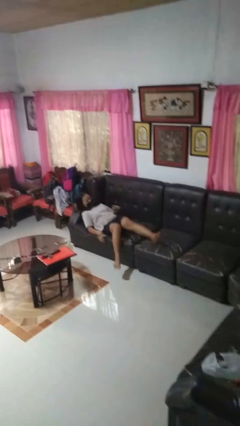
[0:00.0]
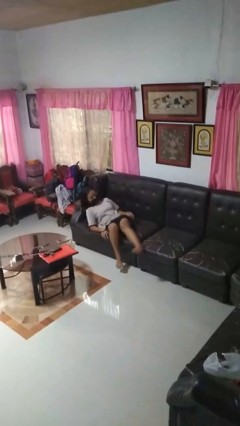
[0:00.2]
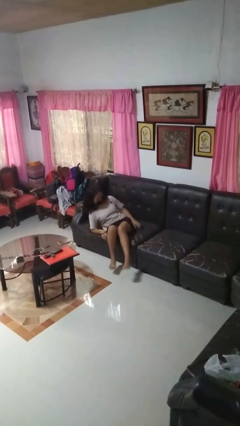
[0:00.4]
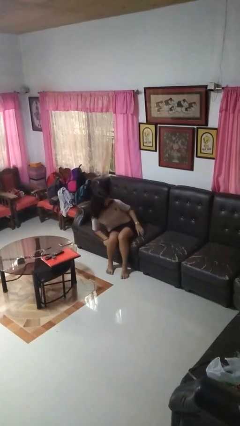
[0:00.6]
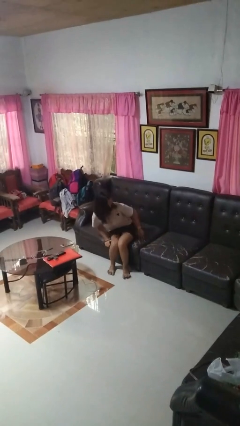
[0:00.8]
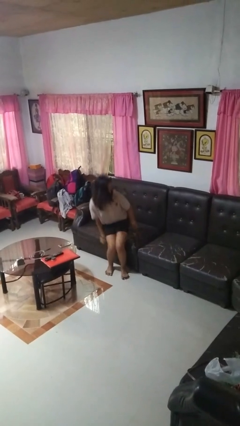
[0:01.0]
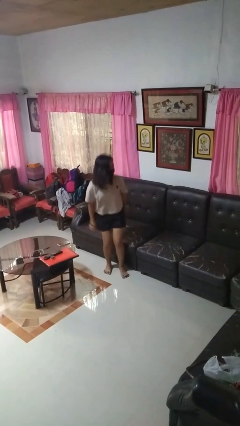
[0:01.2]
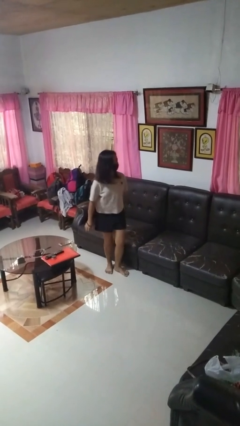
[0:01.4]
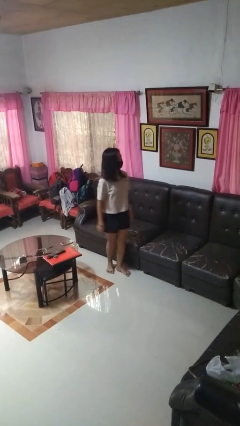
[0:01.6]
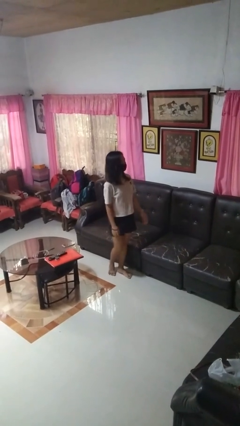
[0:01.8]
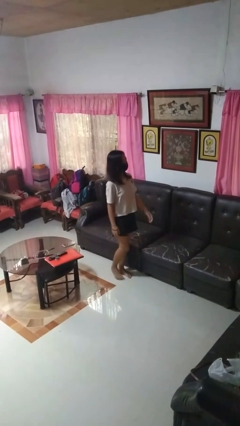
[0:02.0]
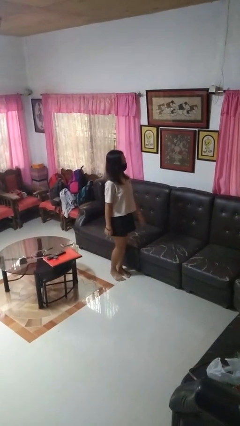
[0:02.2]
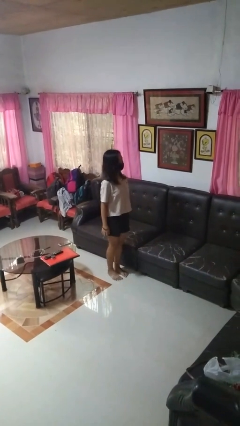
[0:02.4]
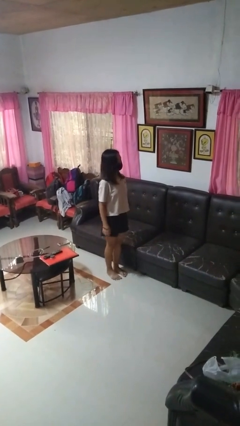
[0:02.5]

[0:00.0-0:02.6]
person stands up

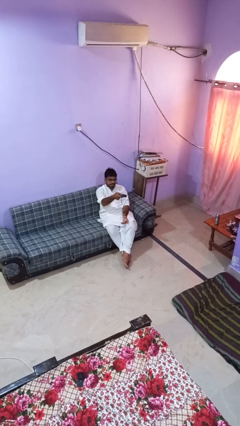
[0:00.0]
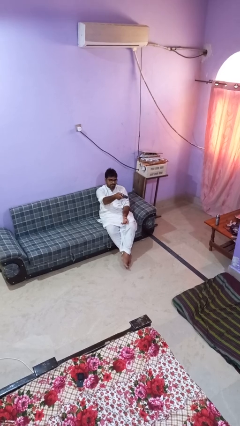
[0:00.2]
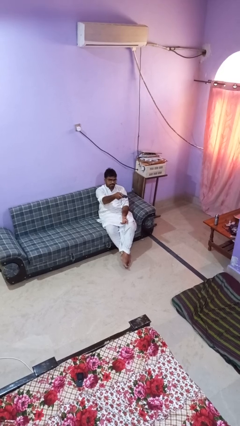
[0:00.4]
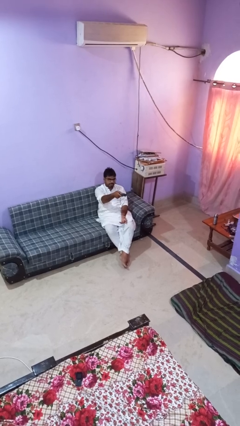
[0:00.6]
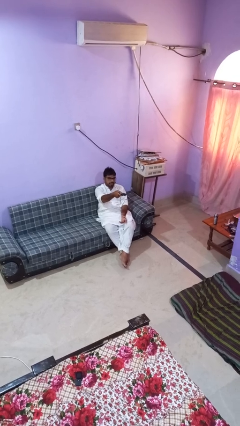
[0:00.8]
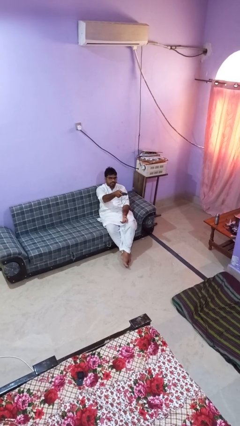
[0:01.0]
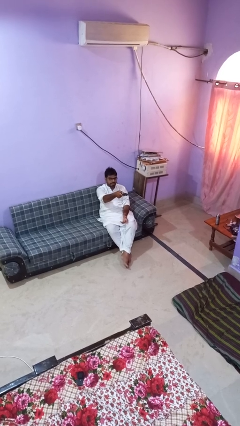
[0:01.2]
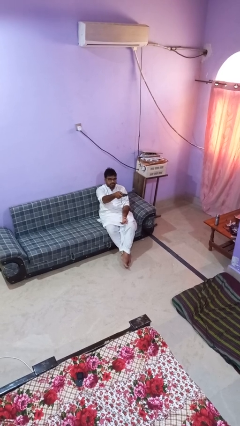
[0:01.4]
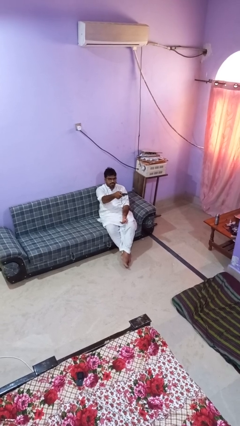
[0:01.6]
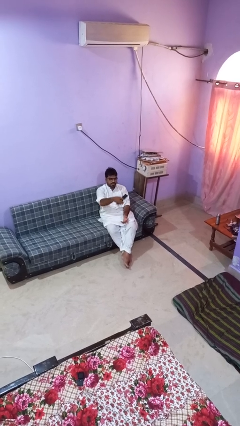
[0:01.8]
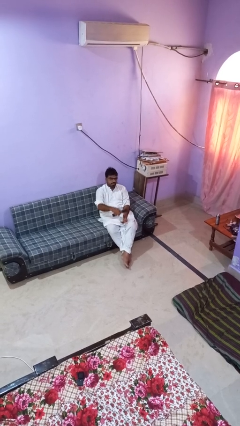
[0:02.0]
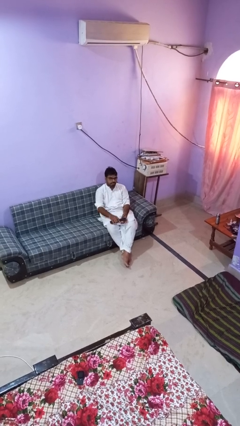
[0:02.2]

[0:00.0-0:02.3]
person uses television remote

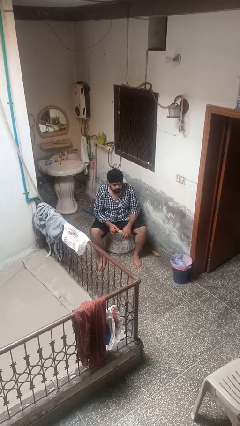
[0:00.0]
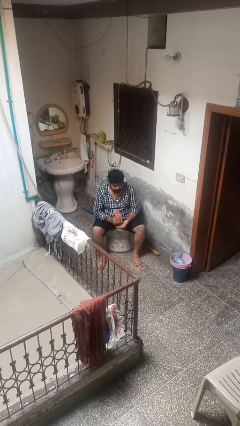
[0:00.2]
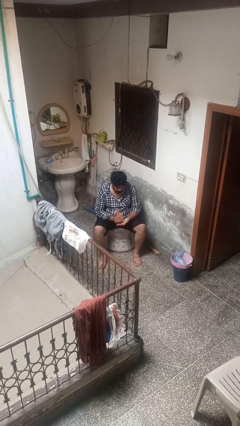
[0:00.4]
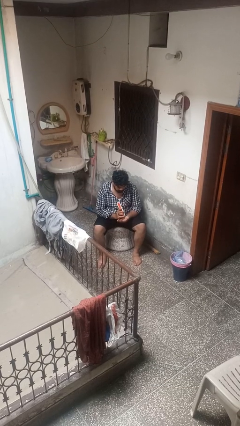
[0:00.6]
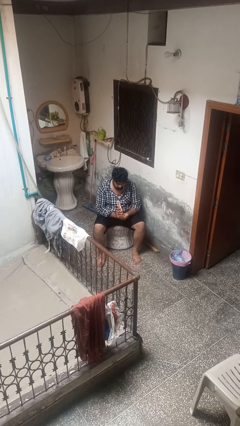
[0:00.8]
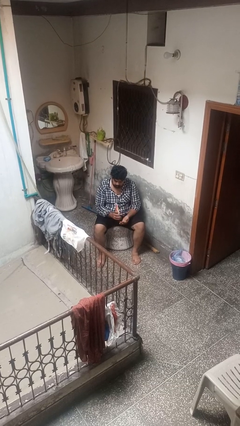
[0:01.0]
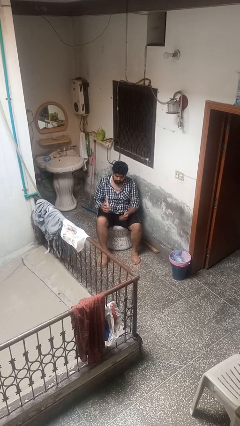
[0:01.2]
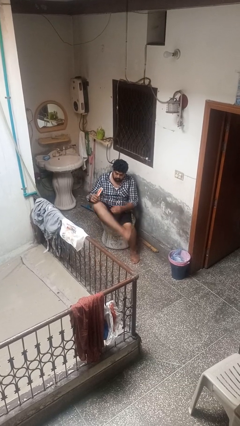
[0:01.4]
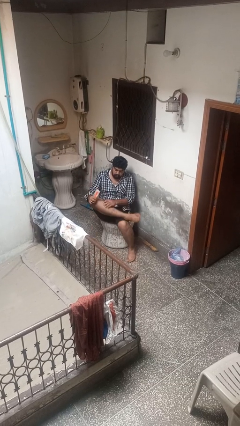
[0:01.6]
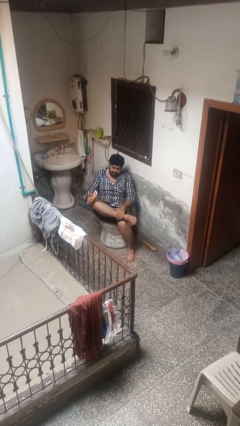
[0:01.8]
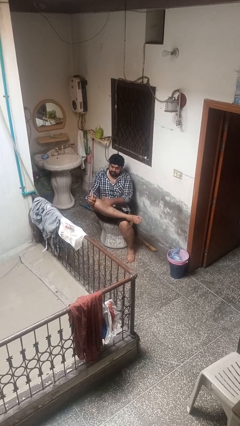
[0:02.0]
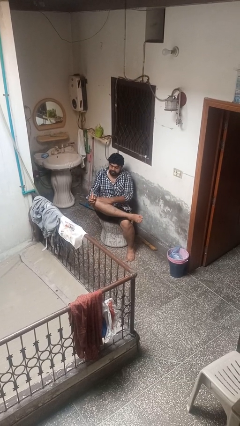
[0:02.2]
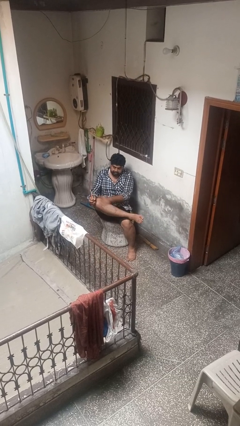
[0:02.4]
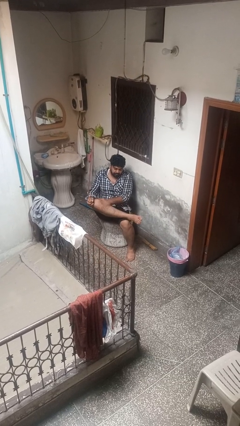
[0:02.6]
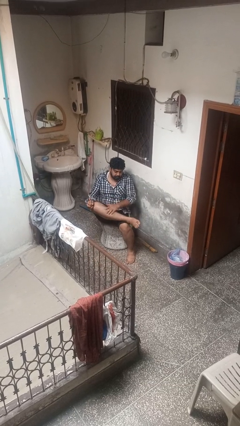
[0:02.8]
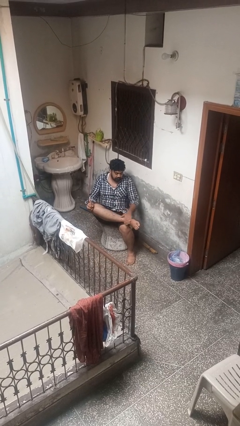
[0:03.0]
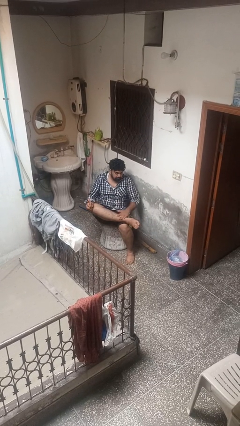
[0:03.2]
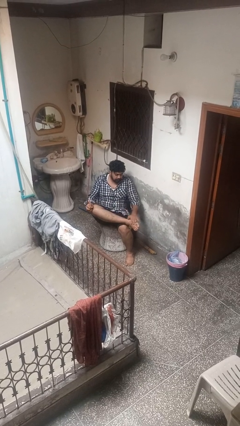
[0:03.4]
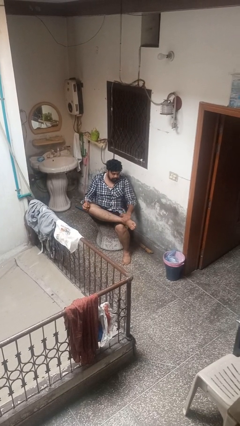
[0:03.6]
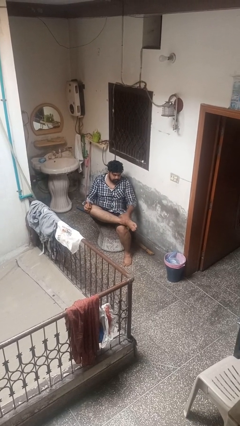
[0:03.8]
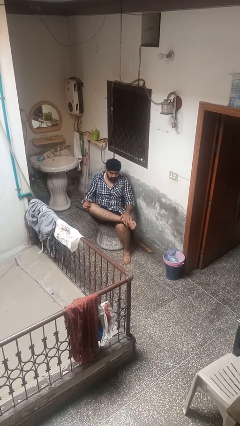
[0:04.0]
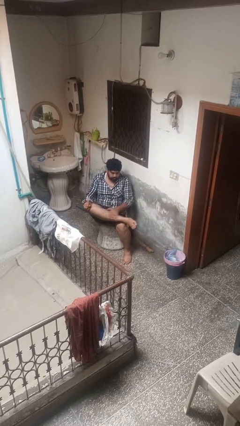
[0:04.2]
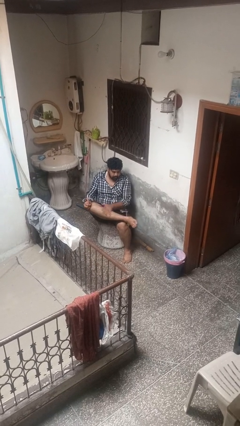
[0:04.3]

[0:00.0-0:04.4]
person applies sunscreen

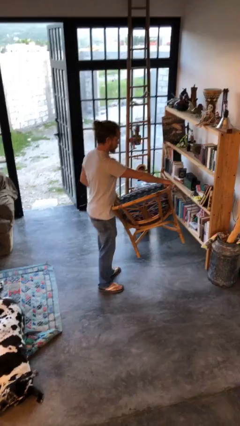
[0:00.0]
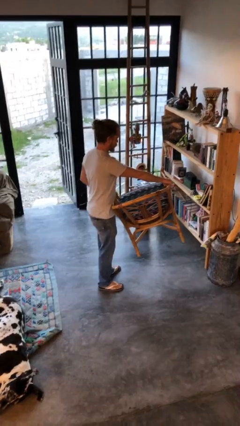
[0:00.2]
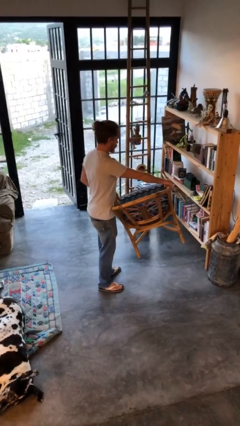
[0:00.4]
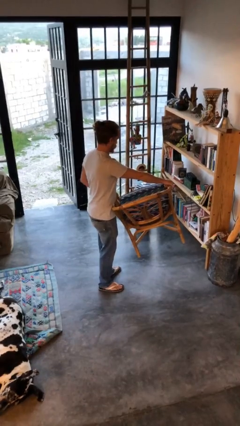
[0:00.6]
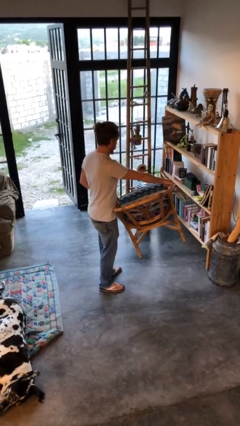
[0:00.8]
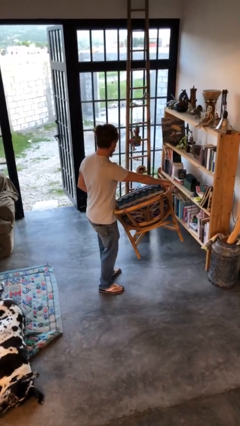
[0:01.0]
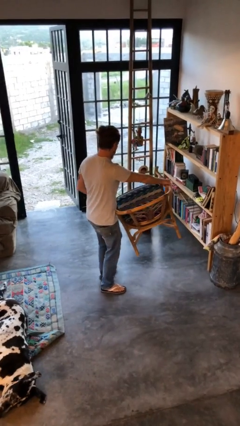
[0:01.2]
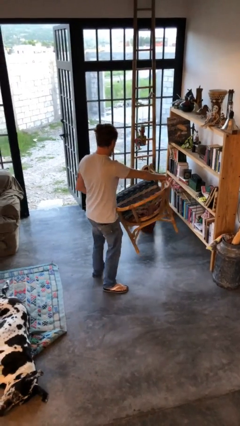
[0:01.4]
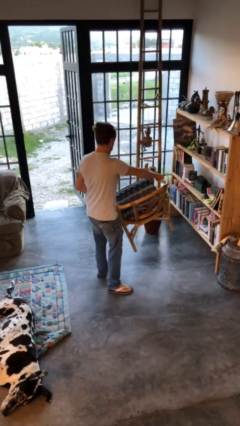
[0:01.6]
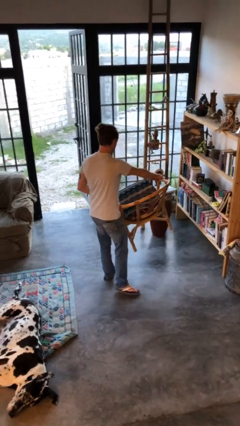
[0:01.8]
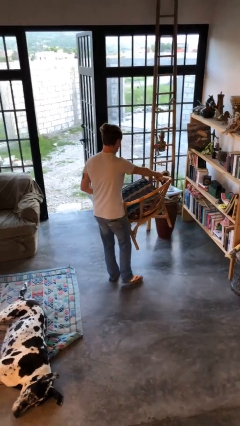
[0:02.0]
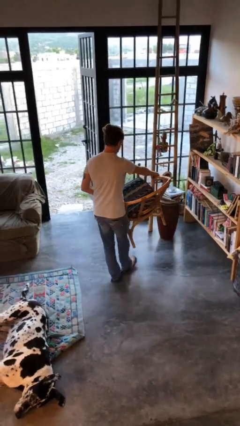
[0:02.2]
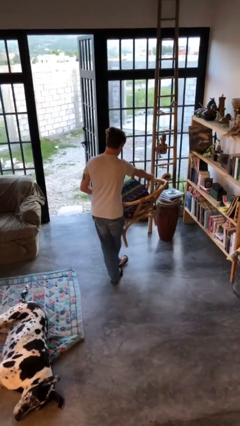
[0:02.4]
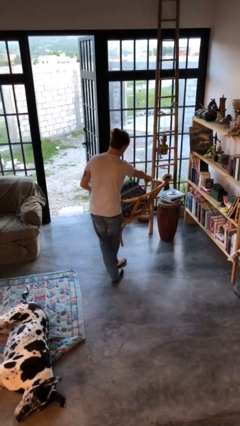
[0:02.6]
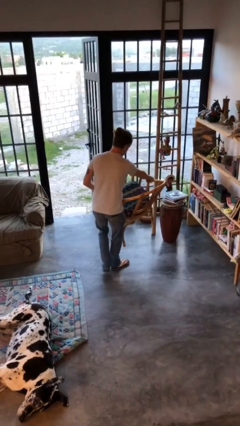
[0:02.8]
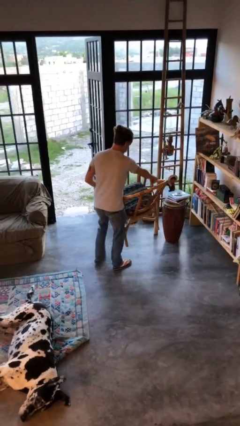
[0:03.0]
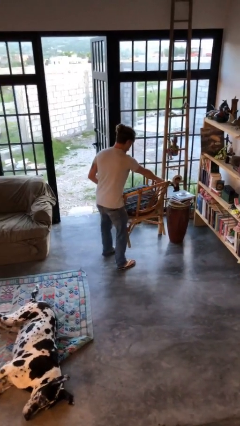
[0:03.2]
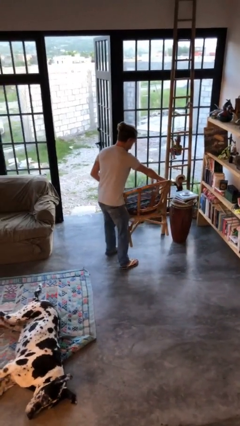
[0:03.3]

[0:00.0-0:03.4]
person carries furniture

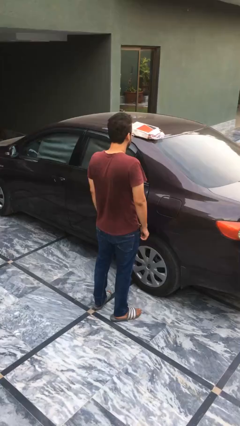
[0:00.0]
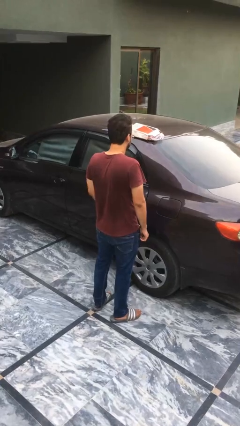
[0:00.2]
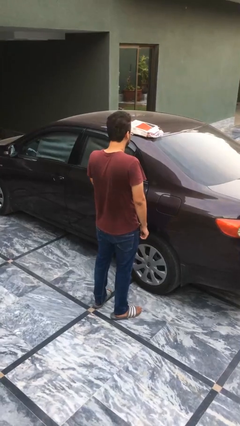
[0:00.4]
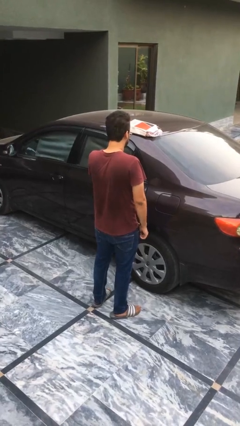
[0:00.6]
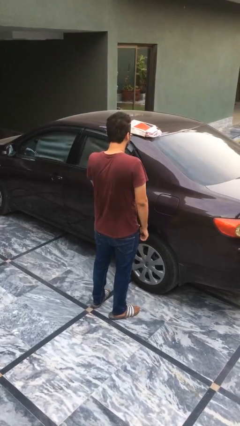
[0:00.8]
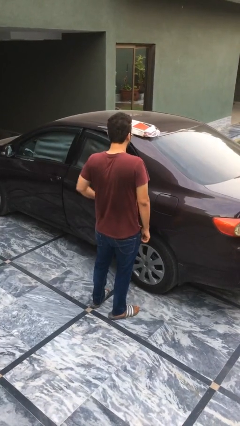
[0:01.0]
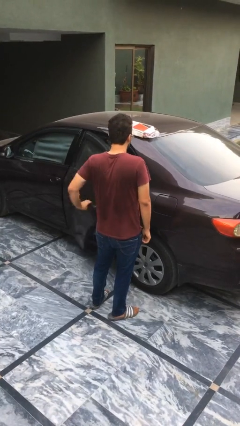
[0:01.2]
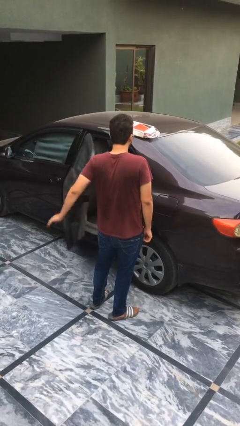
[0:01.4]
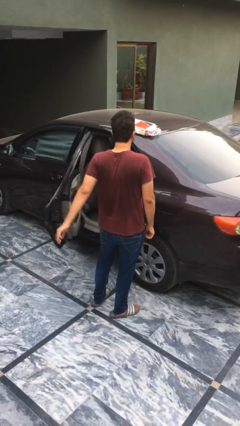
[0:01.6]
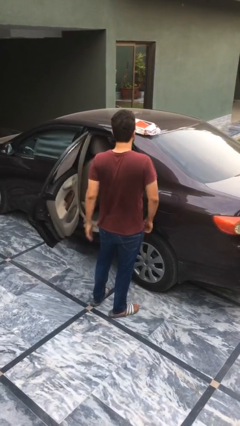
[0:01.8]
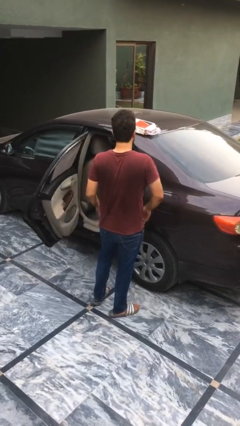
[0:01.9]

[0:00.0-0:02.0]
person opens car door

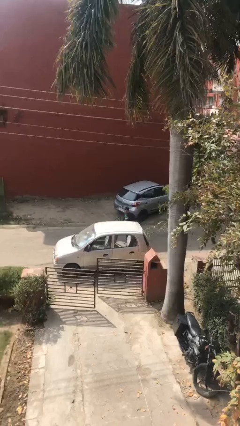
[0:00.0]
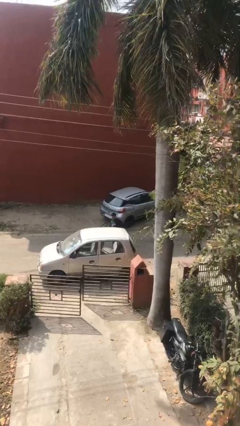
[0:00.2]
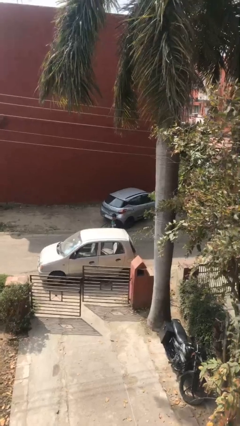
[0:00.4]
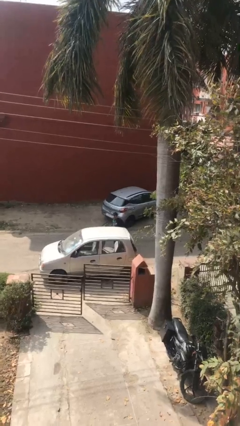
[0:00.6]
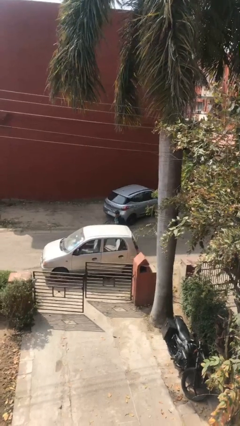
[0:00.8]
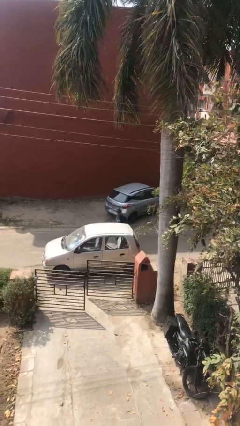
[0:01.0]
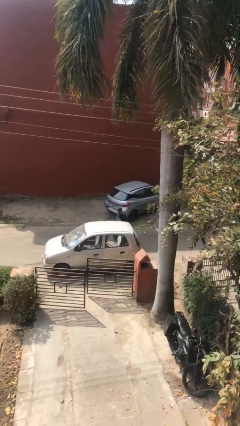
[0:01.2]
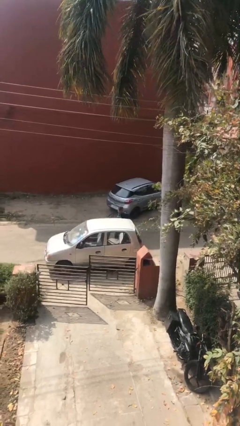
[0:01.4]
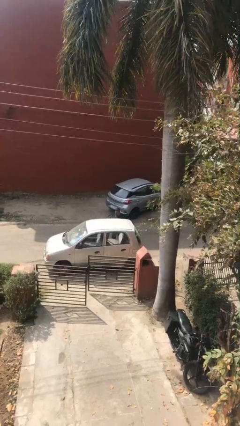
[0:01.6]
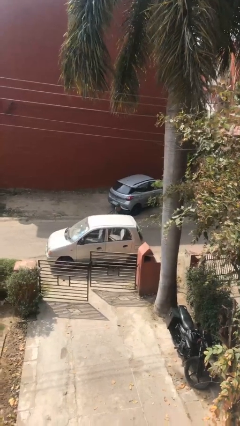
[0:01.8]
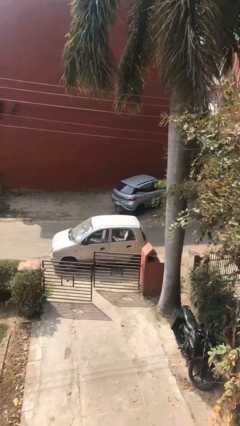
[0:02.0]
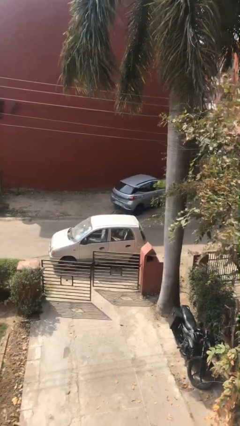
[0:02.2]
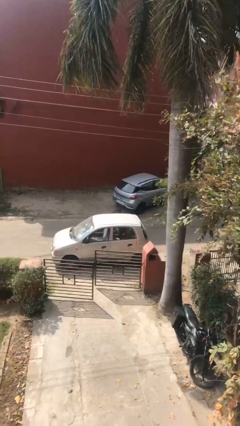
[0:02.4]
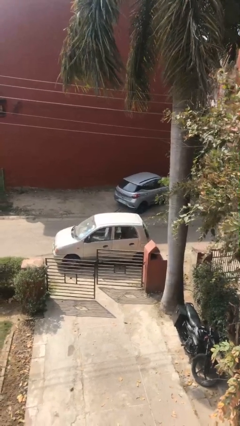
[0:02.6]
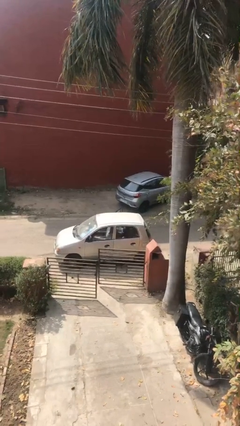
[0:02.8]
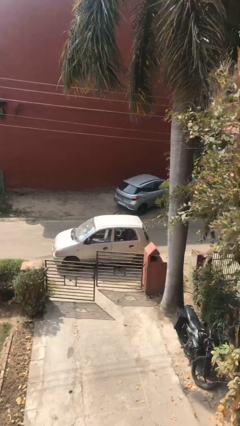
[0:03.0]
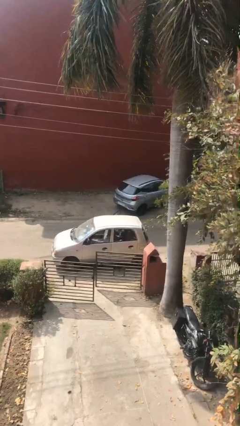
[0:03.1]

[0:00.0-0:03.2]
person enters car
